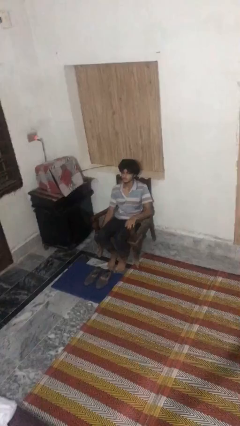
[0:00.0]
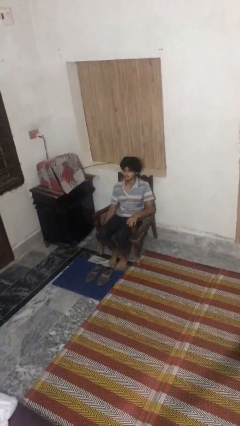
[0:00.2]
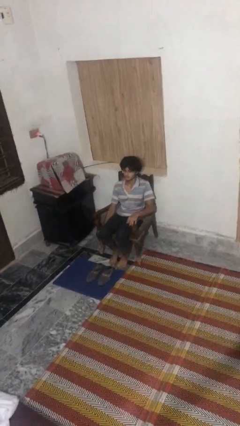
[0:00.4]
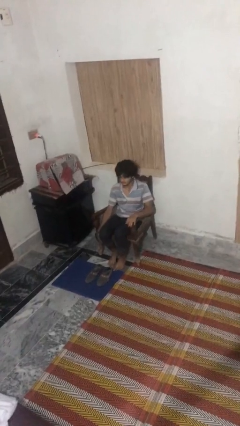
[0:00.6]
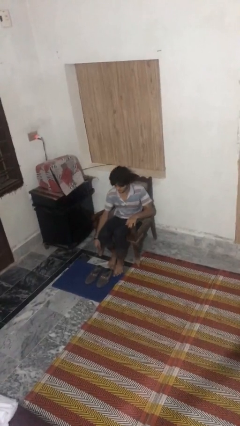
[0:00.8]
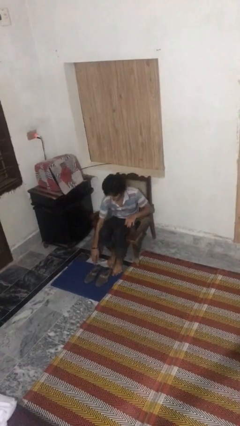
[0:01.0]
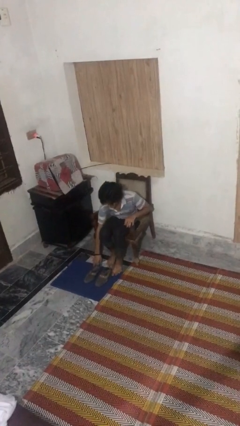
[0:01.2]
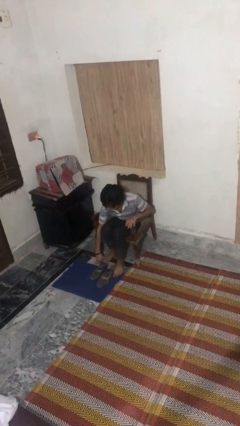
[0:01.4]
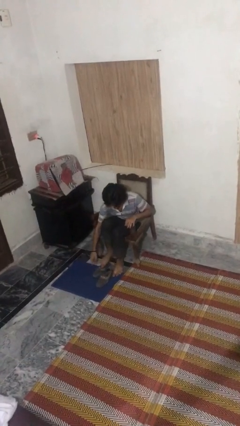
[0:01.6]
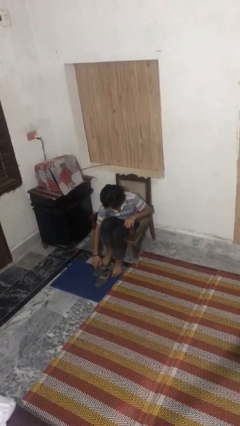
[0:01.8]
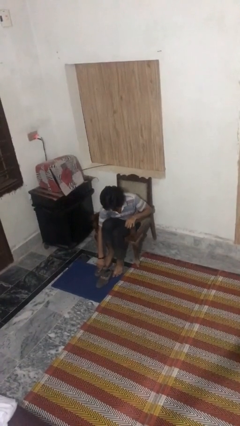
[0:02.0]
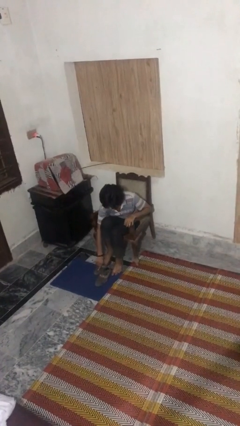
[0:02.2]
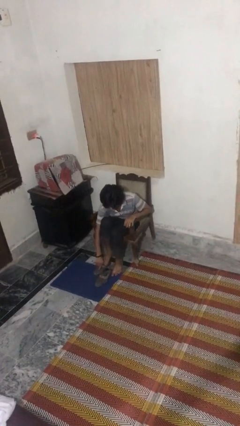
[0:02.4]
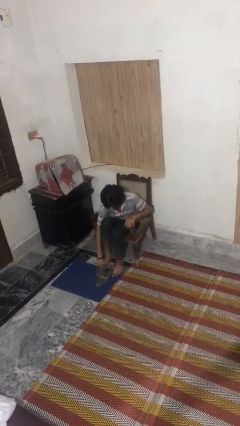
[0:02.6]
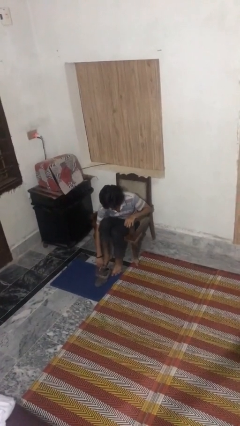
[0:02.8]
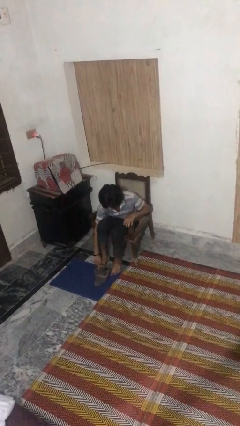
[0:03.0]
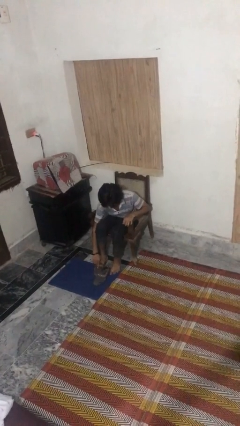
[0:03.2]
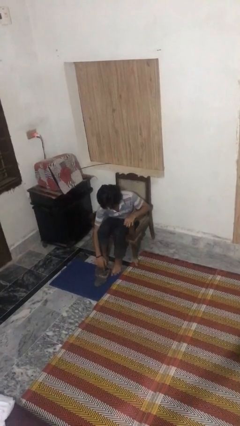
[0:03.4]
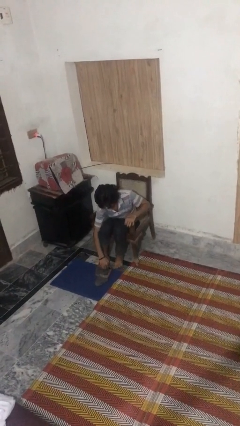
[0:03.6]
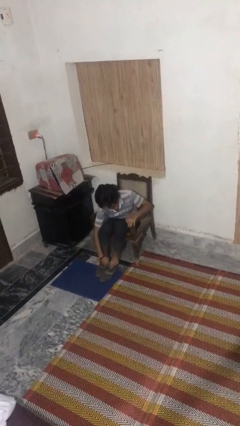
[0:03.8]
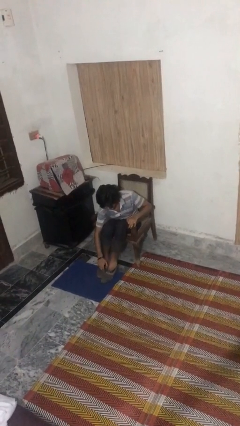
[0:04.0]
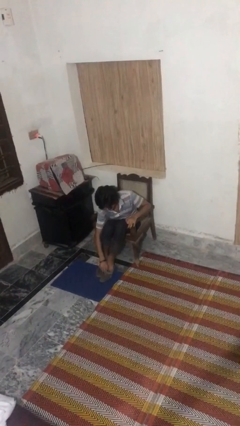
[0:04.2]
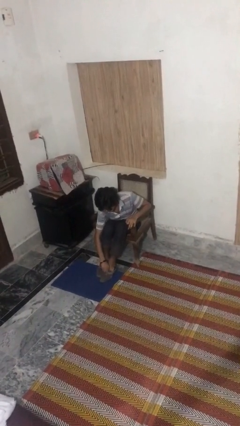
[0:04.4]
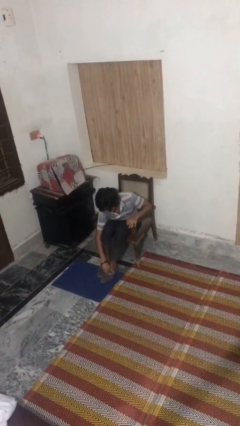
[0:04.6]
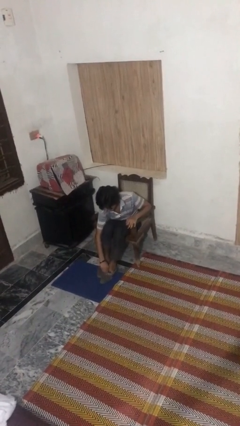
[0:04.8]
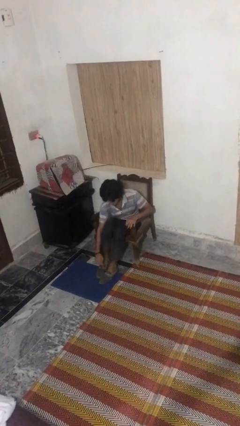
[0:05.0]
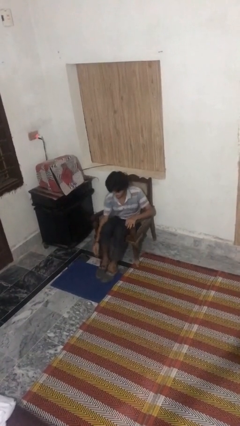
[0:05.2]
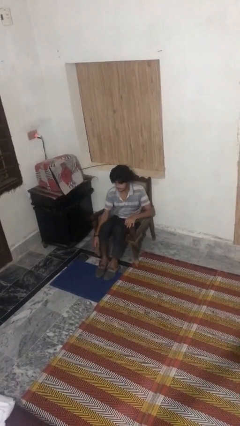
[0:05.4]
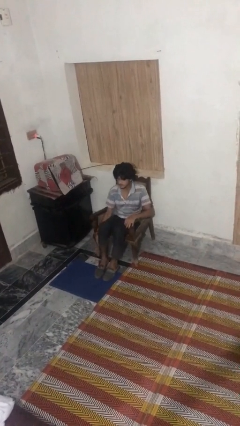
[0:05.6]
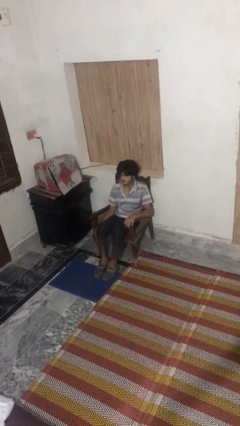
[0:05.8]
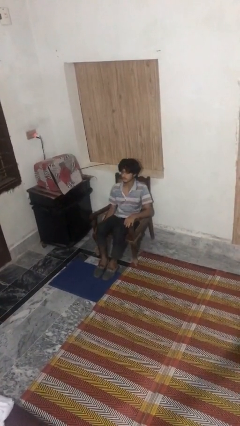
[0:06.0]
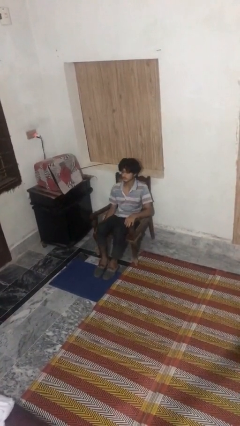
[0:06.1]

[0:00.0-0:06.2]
person puts on shoes

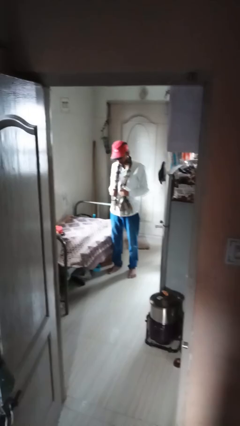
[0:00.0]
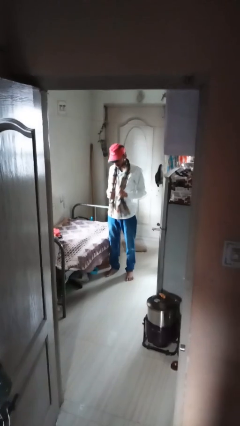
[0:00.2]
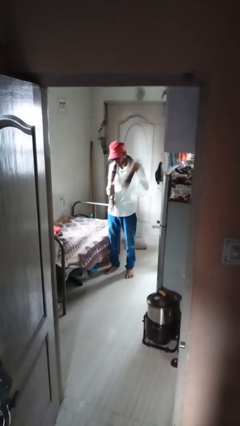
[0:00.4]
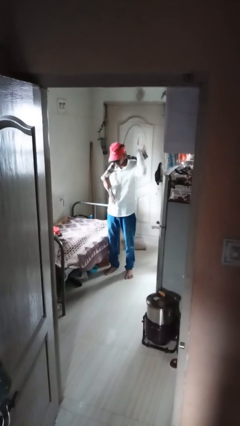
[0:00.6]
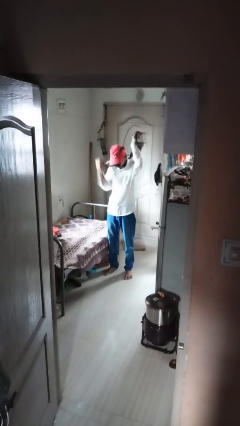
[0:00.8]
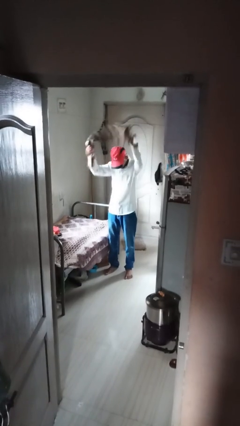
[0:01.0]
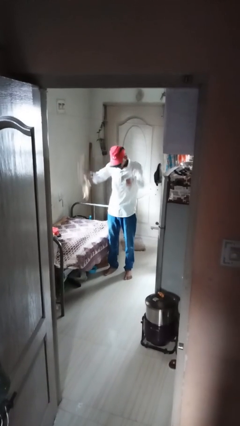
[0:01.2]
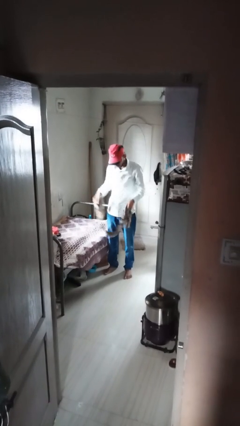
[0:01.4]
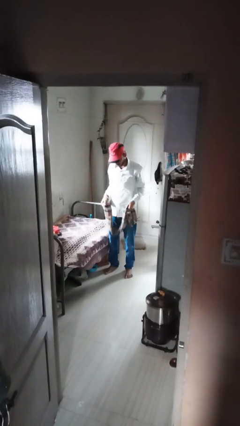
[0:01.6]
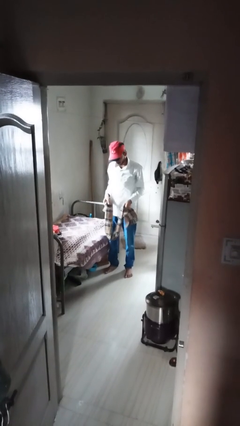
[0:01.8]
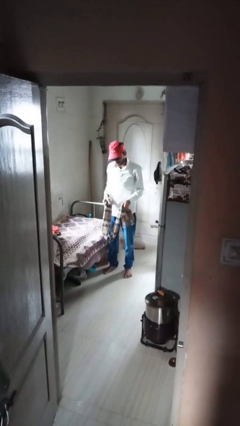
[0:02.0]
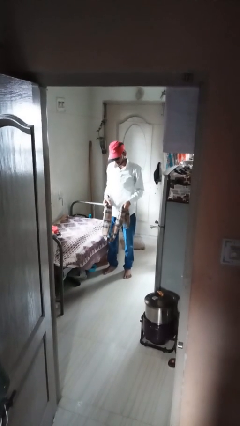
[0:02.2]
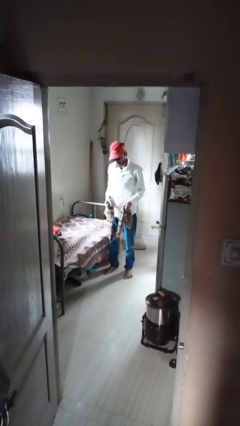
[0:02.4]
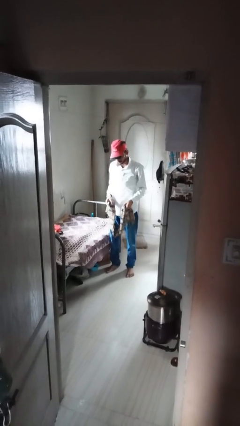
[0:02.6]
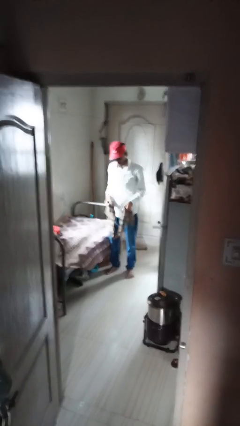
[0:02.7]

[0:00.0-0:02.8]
person takes off scarf

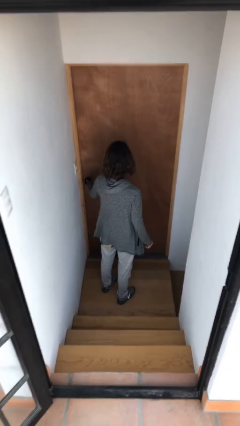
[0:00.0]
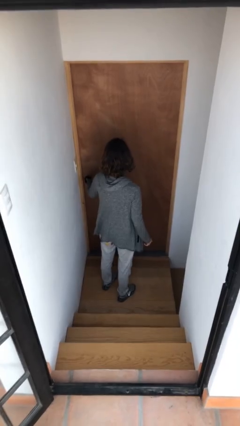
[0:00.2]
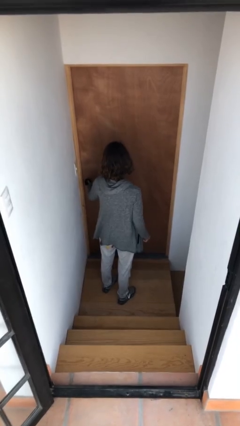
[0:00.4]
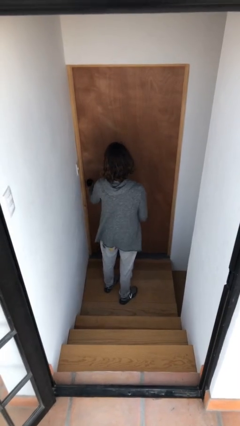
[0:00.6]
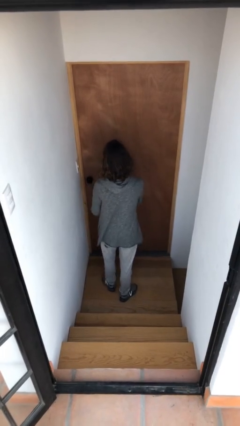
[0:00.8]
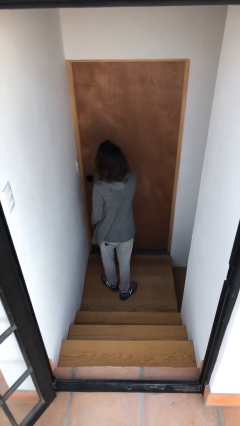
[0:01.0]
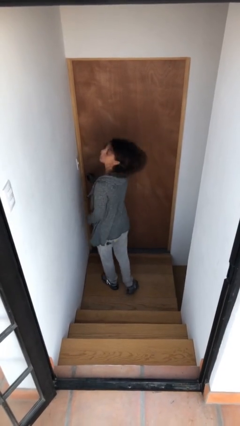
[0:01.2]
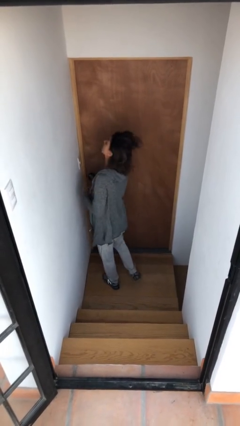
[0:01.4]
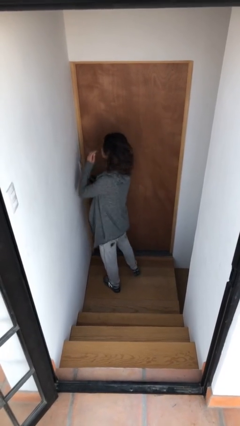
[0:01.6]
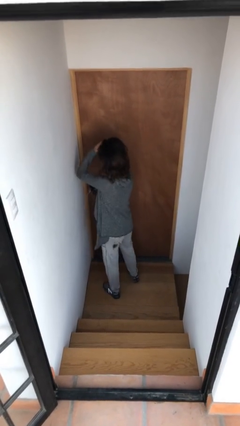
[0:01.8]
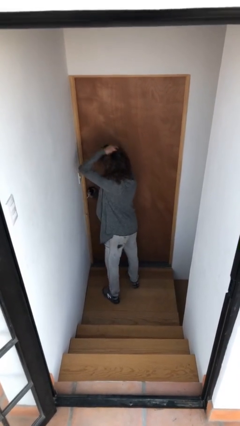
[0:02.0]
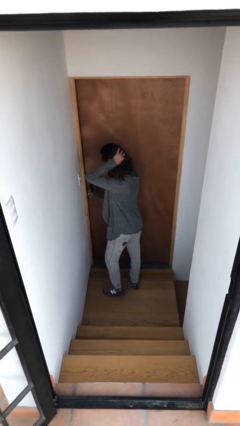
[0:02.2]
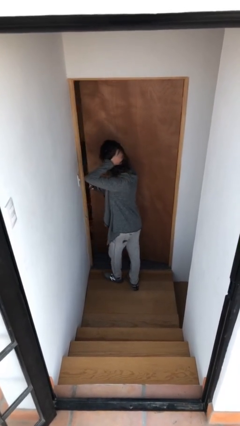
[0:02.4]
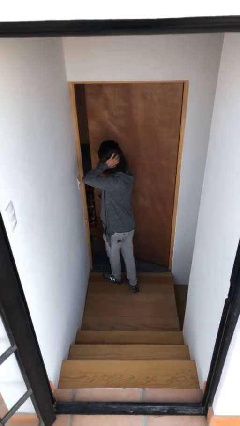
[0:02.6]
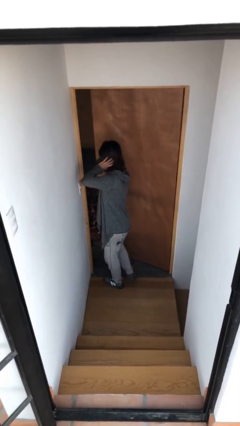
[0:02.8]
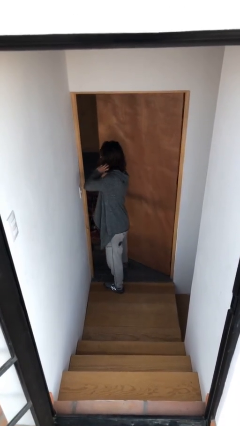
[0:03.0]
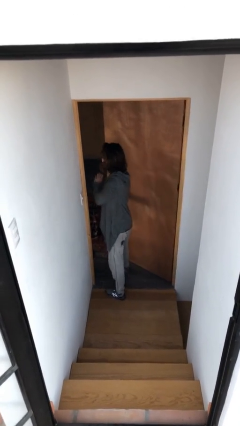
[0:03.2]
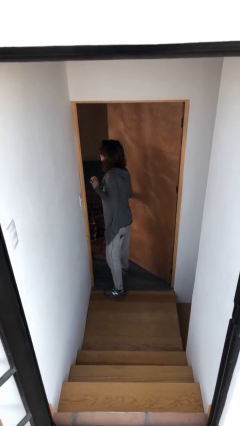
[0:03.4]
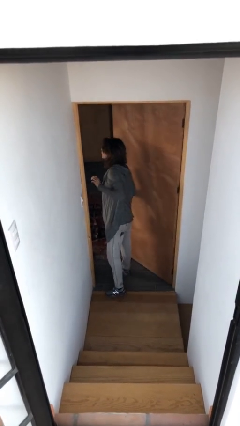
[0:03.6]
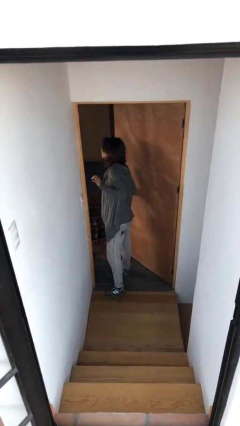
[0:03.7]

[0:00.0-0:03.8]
person opens facility door

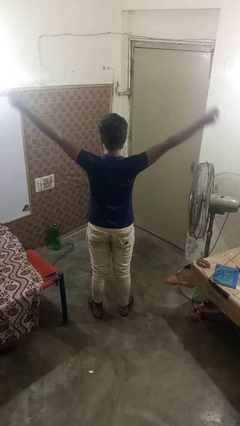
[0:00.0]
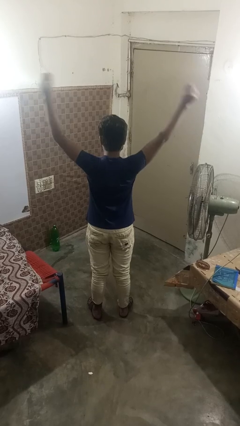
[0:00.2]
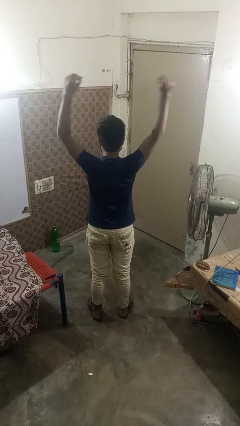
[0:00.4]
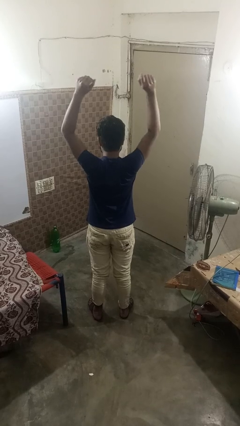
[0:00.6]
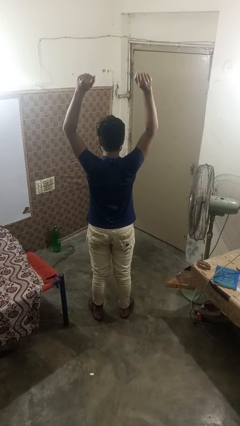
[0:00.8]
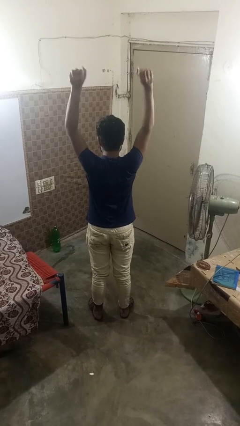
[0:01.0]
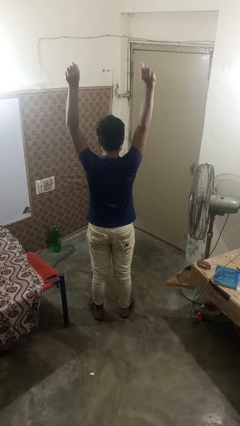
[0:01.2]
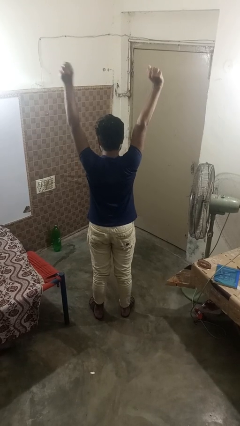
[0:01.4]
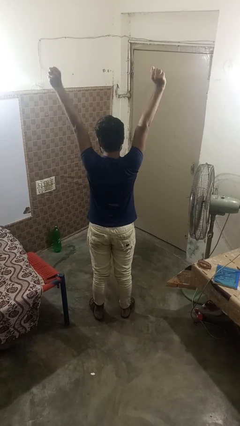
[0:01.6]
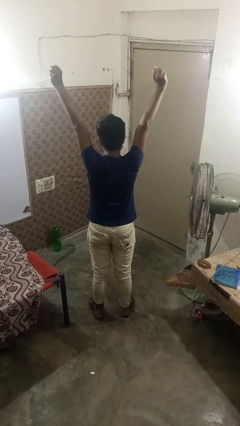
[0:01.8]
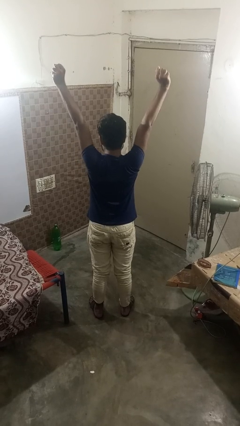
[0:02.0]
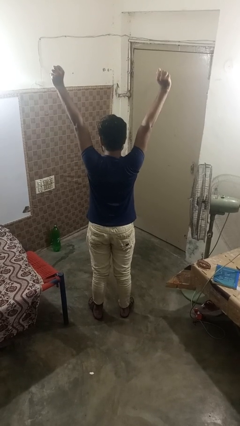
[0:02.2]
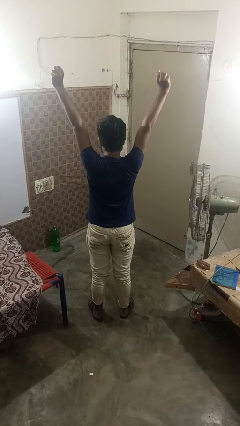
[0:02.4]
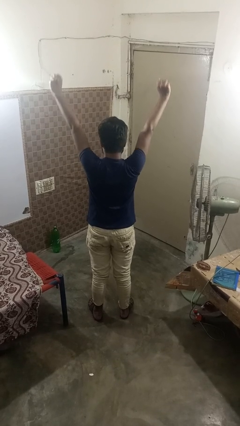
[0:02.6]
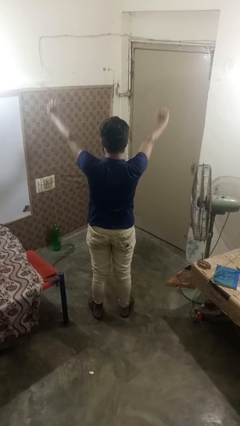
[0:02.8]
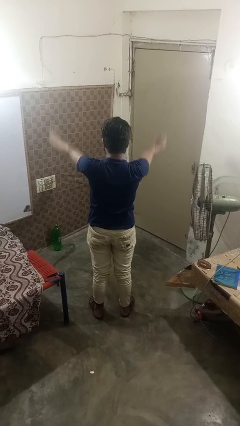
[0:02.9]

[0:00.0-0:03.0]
person stretches arms over head

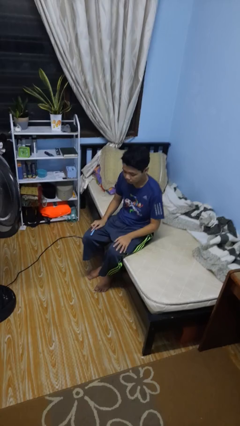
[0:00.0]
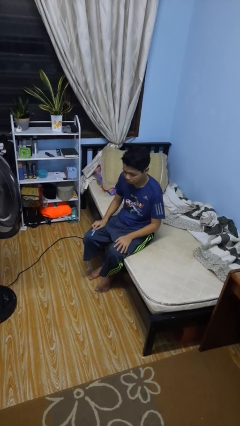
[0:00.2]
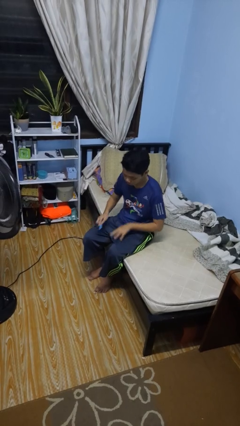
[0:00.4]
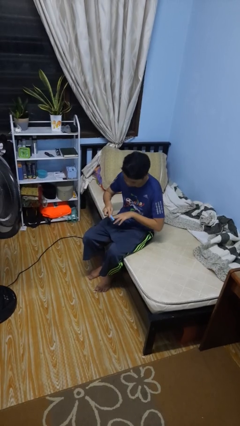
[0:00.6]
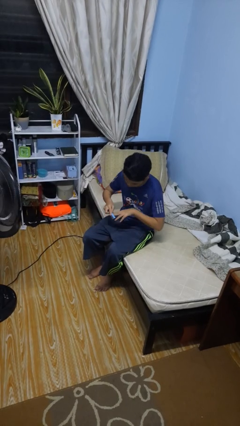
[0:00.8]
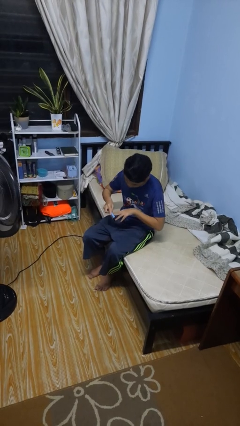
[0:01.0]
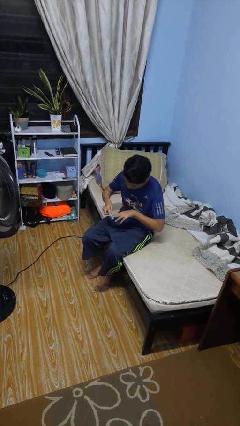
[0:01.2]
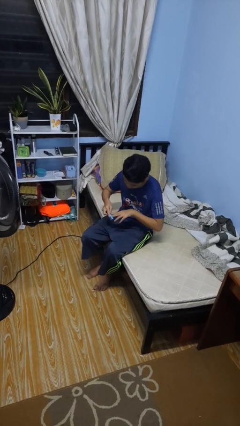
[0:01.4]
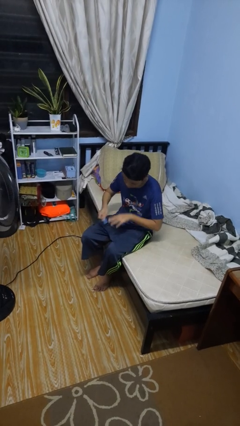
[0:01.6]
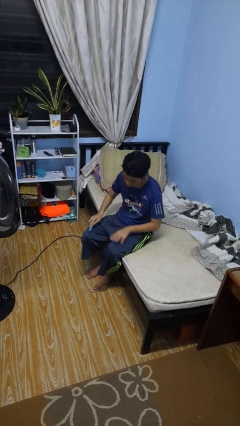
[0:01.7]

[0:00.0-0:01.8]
person files fingernails
